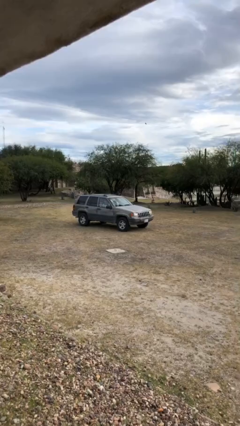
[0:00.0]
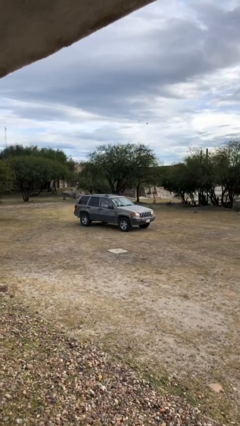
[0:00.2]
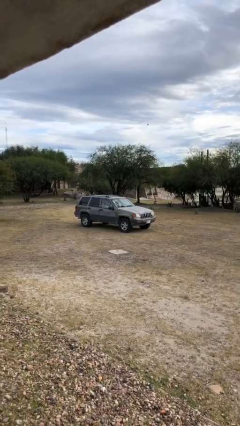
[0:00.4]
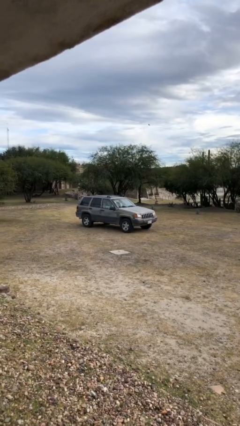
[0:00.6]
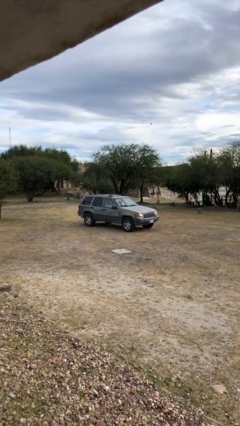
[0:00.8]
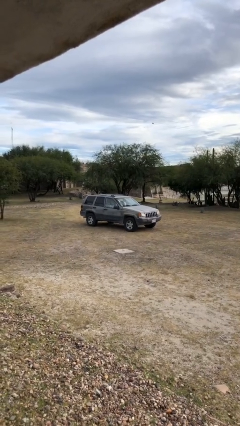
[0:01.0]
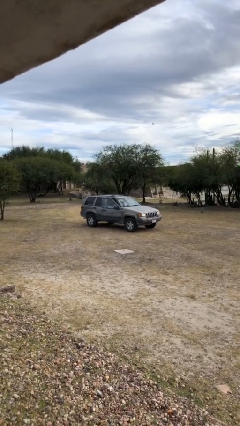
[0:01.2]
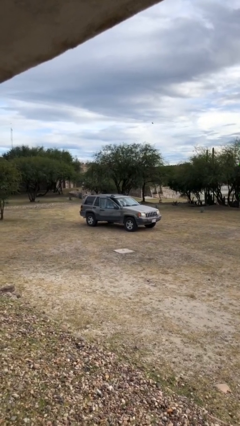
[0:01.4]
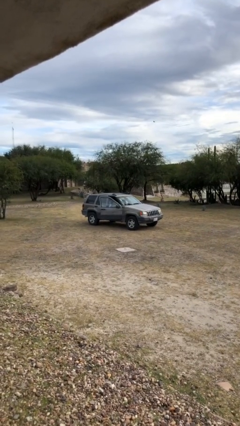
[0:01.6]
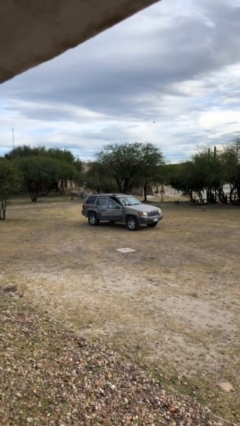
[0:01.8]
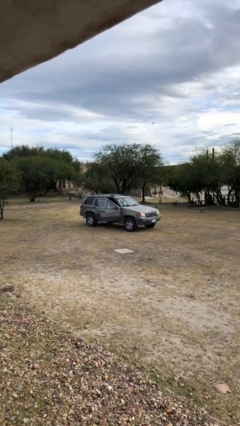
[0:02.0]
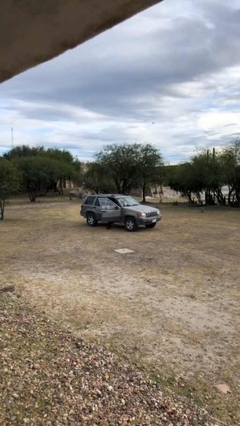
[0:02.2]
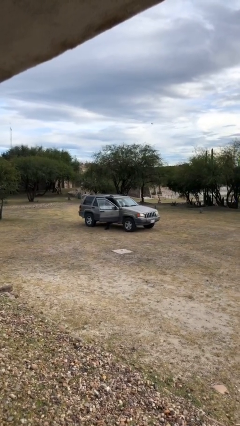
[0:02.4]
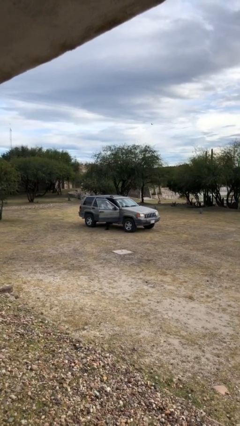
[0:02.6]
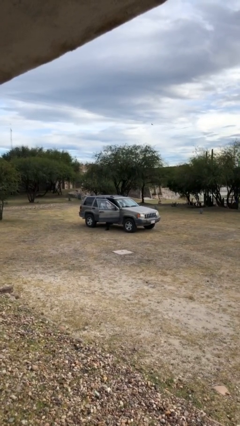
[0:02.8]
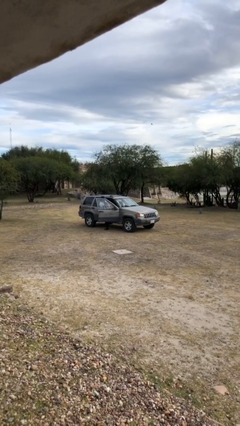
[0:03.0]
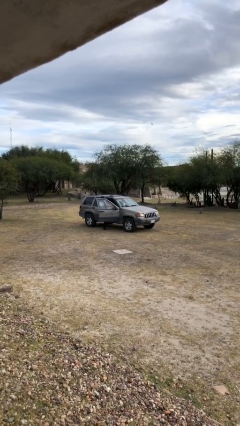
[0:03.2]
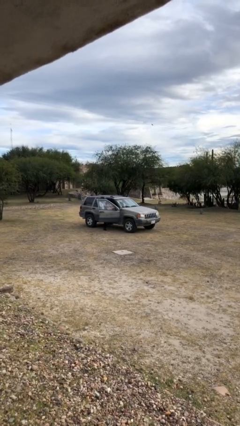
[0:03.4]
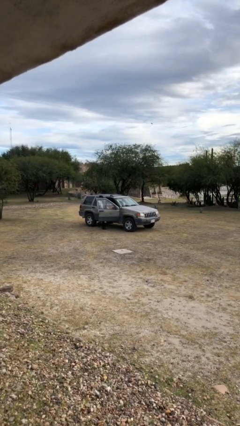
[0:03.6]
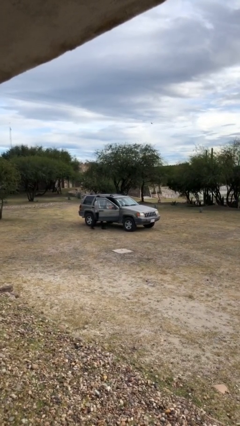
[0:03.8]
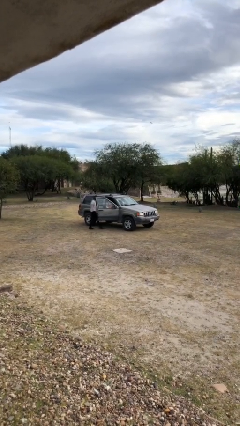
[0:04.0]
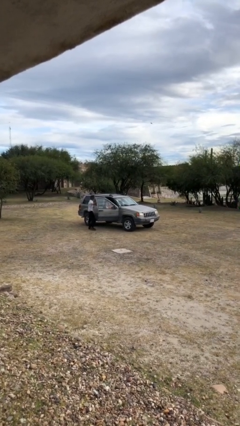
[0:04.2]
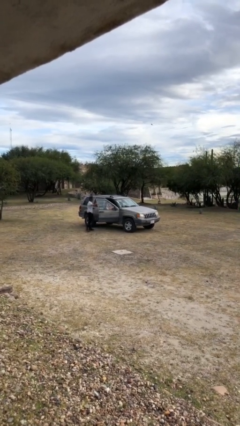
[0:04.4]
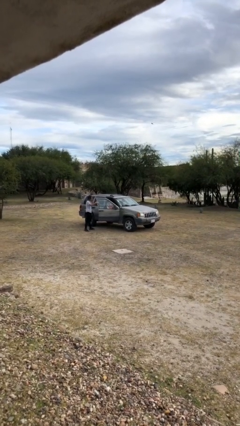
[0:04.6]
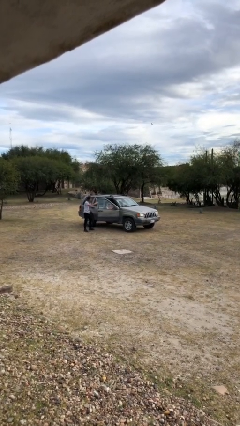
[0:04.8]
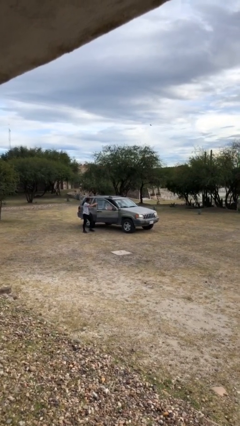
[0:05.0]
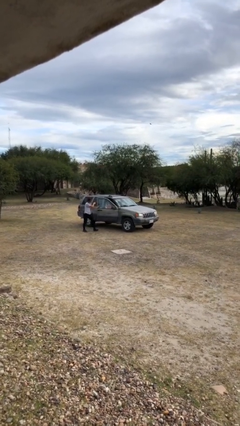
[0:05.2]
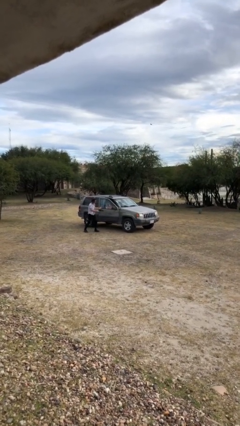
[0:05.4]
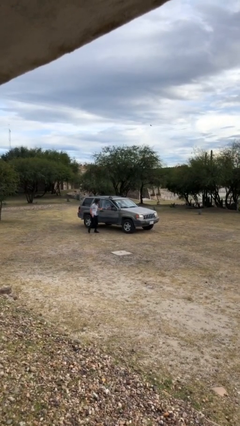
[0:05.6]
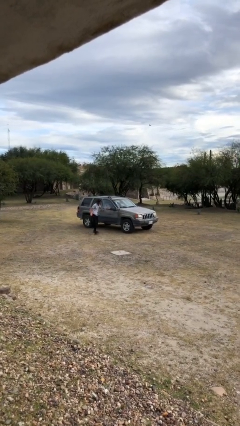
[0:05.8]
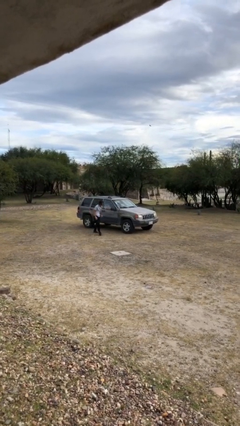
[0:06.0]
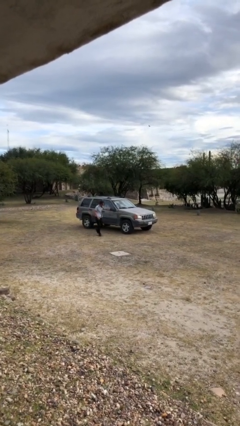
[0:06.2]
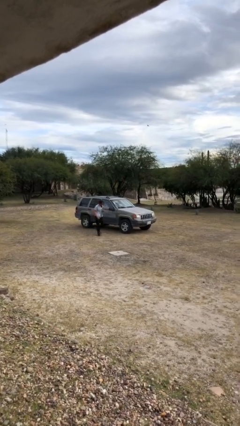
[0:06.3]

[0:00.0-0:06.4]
car drops off person

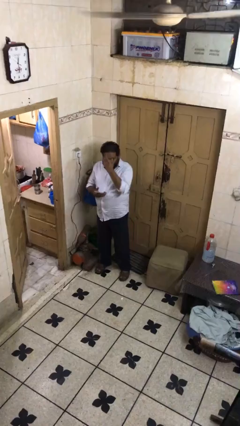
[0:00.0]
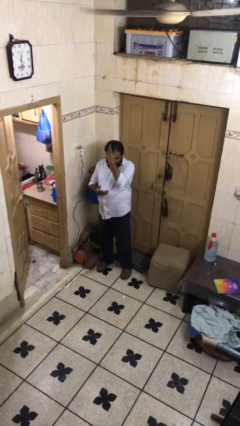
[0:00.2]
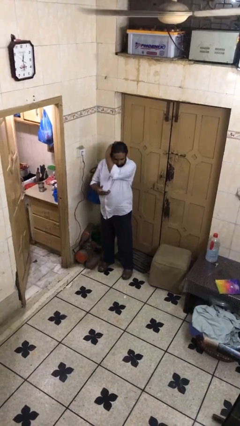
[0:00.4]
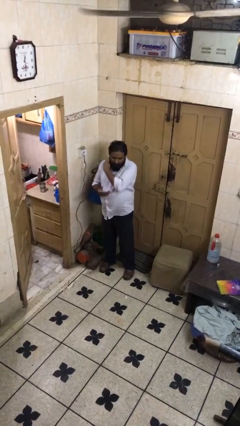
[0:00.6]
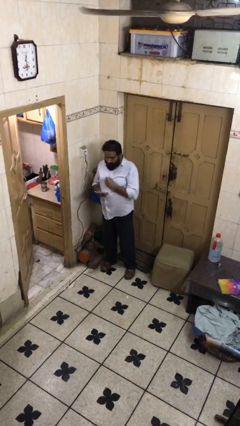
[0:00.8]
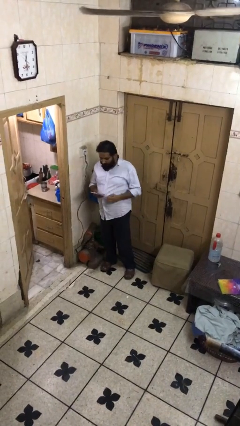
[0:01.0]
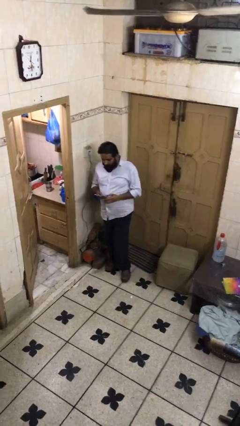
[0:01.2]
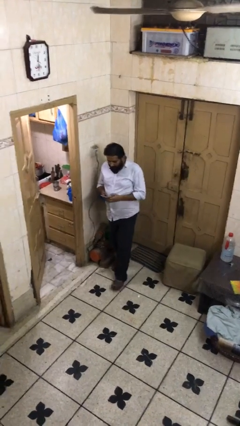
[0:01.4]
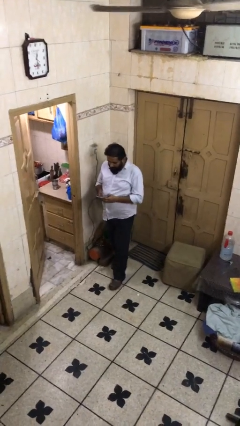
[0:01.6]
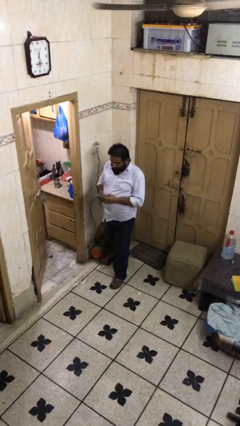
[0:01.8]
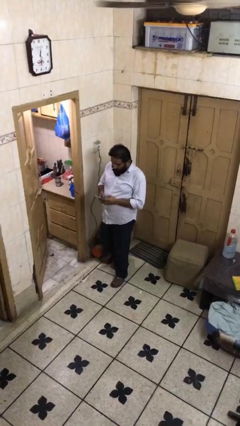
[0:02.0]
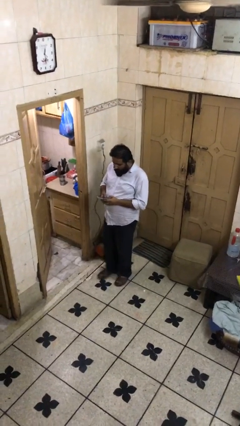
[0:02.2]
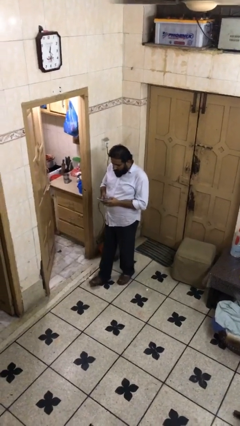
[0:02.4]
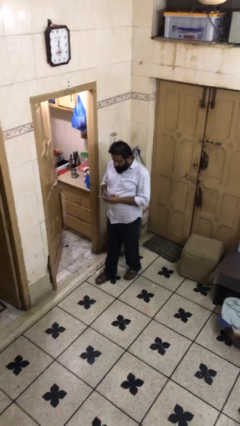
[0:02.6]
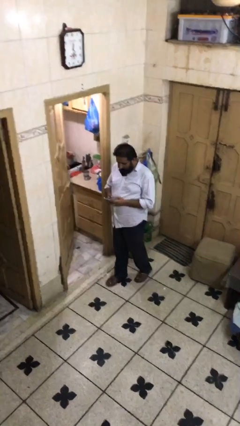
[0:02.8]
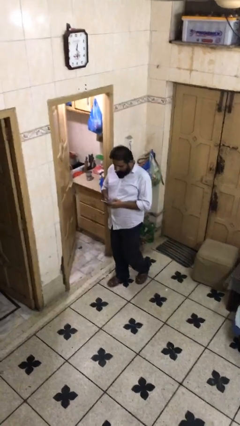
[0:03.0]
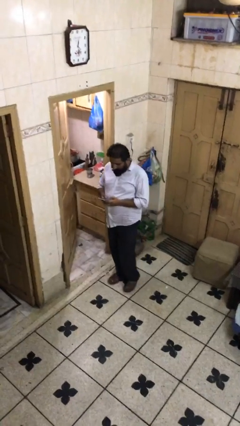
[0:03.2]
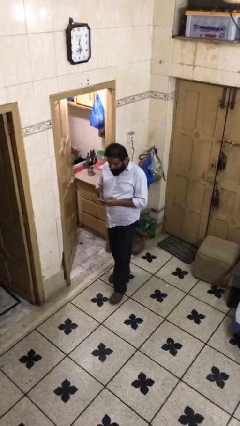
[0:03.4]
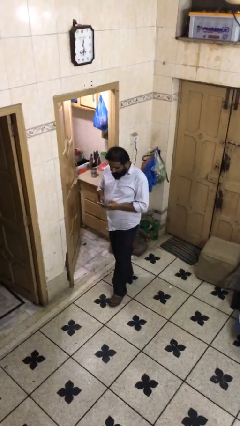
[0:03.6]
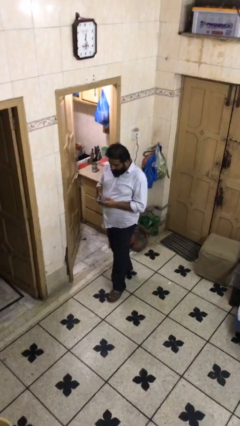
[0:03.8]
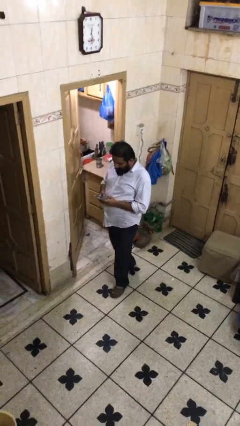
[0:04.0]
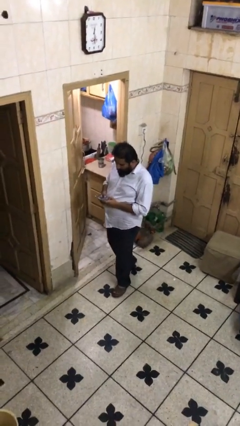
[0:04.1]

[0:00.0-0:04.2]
person texts on phone

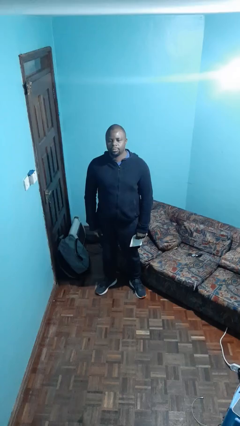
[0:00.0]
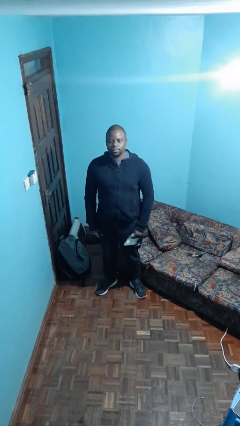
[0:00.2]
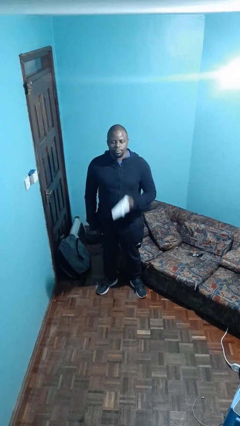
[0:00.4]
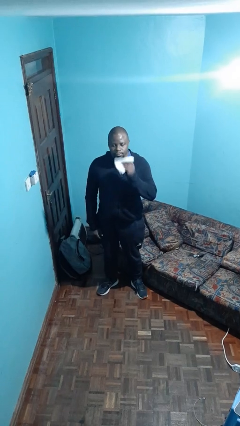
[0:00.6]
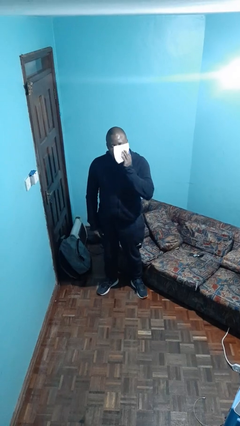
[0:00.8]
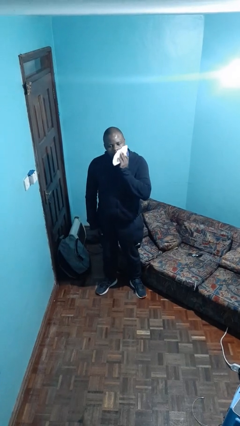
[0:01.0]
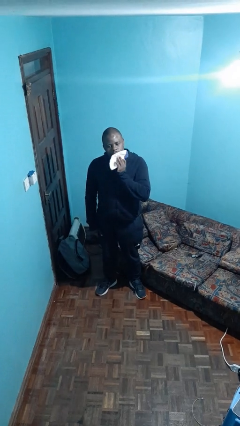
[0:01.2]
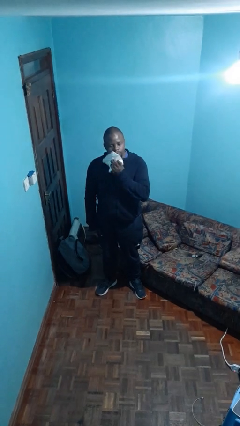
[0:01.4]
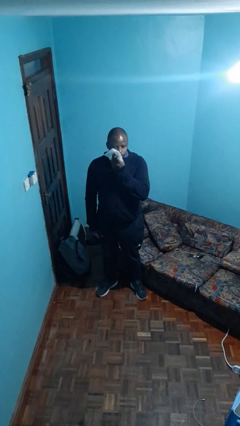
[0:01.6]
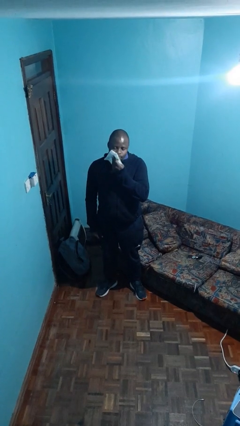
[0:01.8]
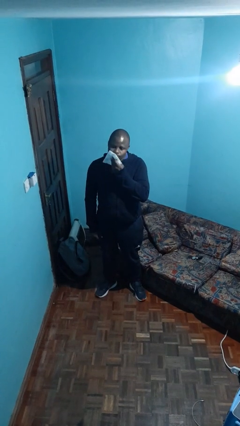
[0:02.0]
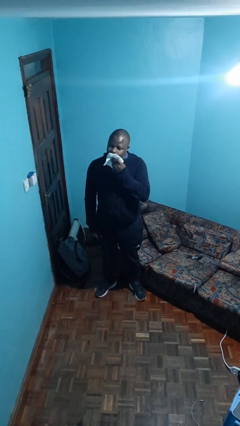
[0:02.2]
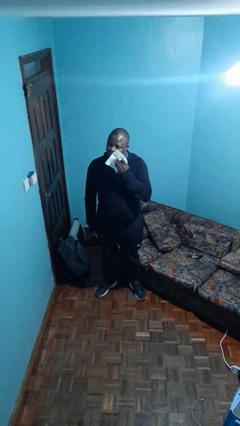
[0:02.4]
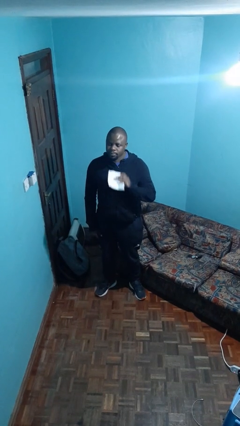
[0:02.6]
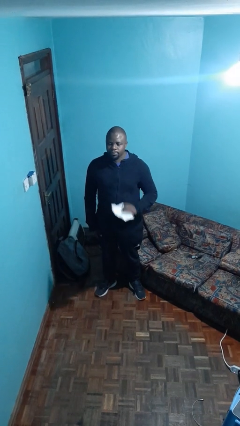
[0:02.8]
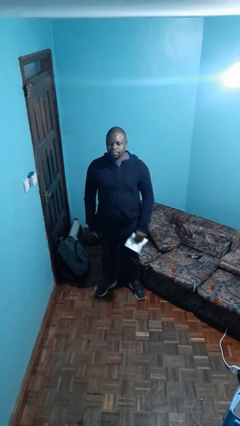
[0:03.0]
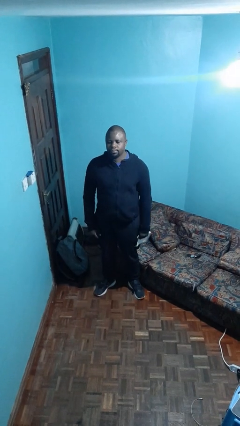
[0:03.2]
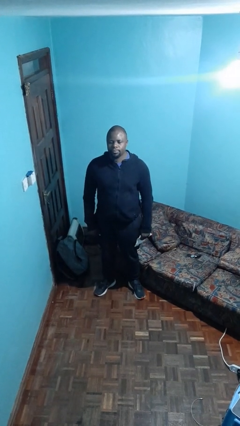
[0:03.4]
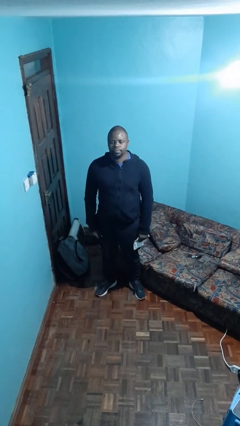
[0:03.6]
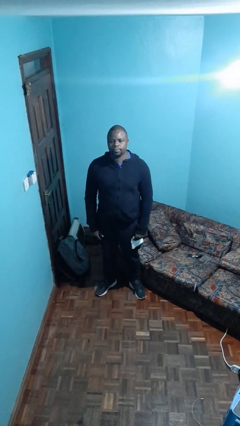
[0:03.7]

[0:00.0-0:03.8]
person wipes mouth with napkin

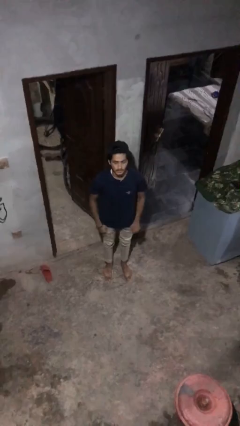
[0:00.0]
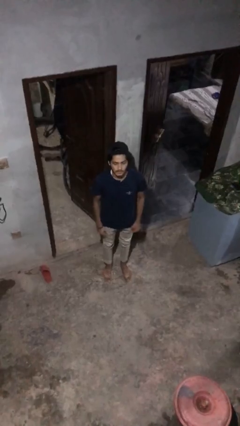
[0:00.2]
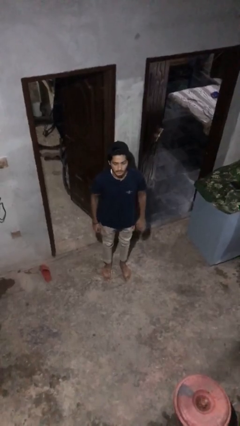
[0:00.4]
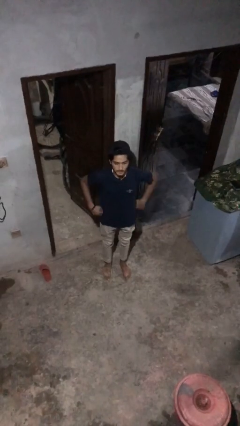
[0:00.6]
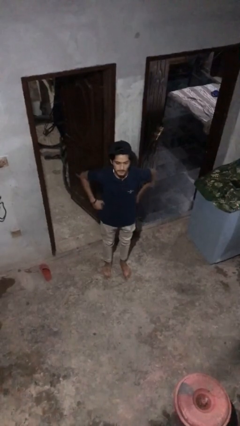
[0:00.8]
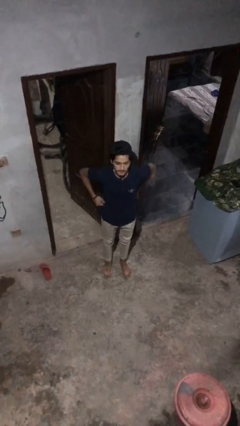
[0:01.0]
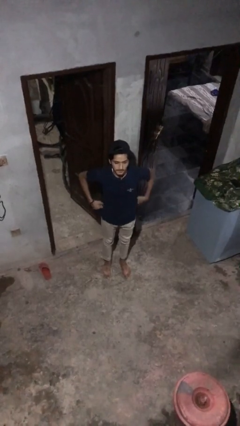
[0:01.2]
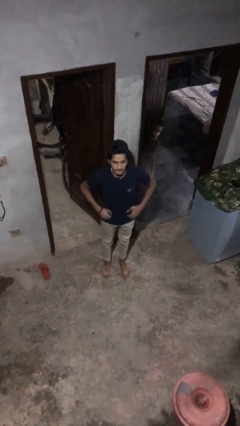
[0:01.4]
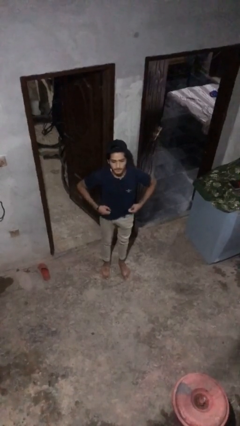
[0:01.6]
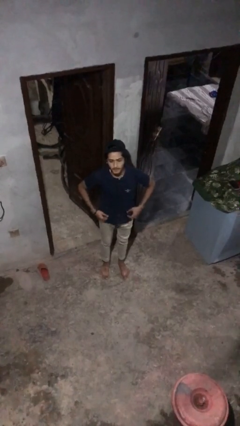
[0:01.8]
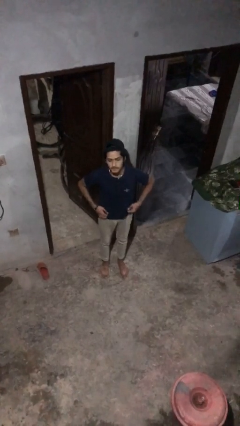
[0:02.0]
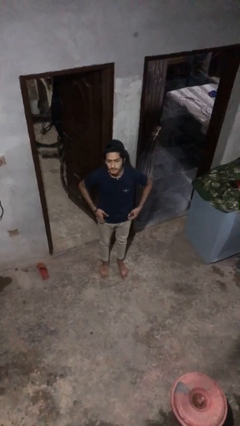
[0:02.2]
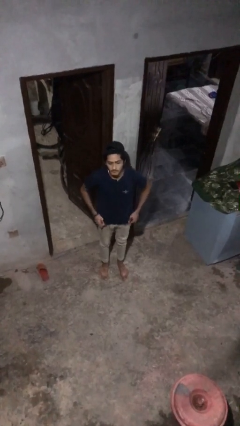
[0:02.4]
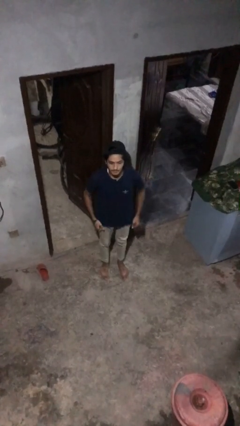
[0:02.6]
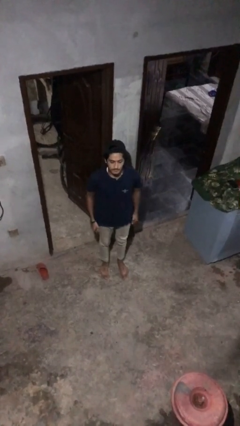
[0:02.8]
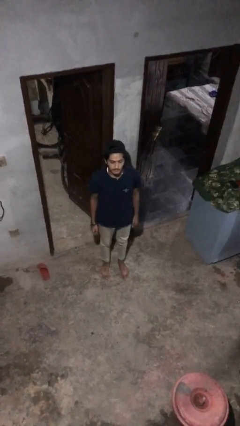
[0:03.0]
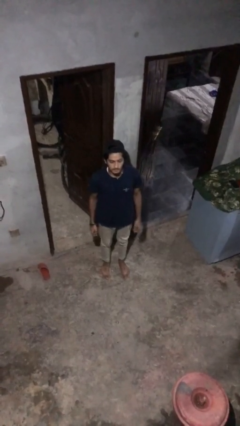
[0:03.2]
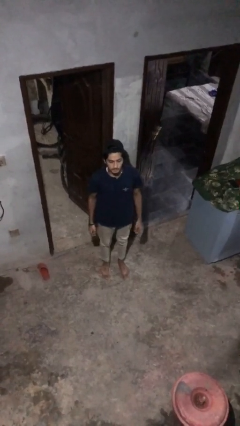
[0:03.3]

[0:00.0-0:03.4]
person hikes up pants
